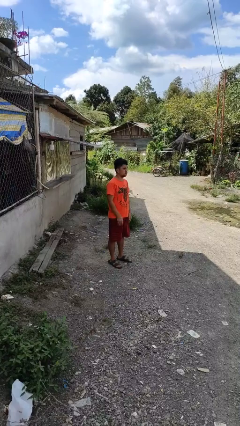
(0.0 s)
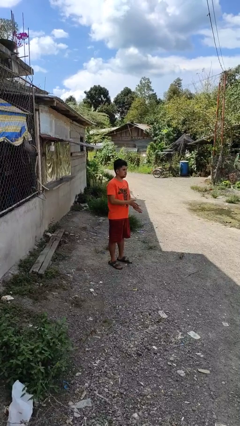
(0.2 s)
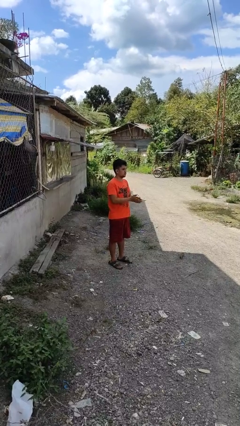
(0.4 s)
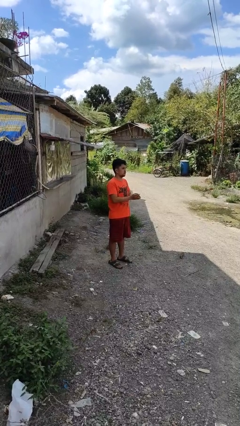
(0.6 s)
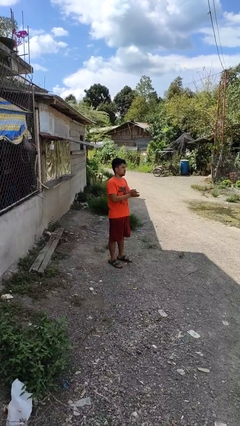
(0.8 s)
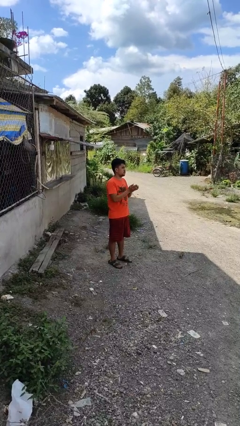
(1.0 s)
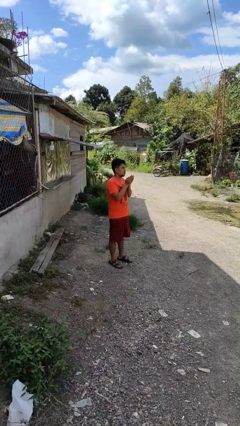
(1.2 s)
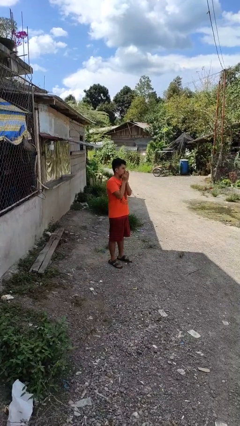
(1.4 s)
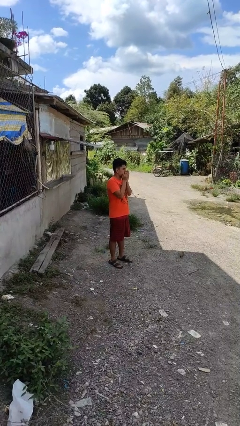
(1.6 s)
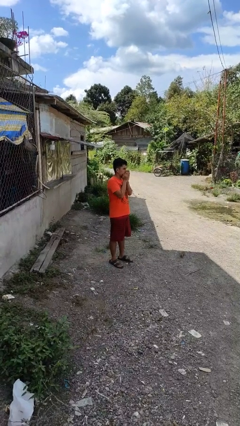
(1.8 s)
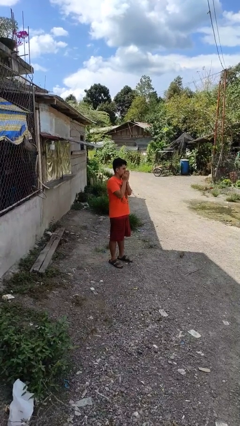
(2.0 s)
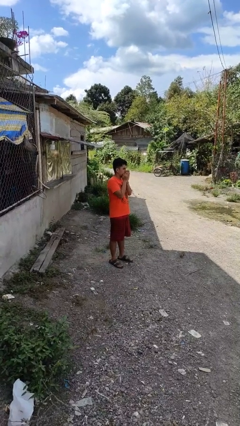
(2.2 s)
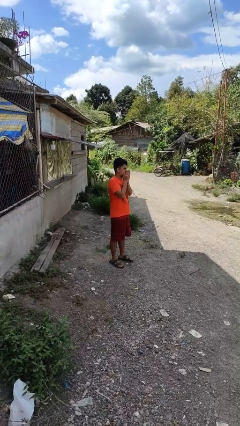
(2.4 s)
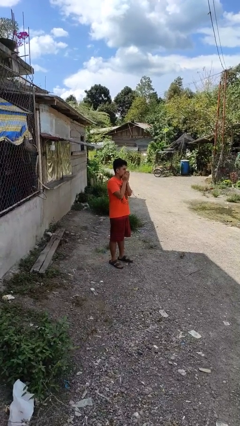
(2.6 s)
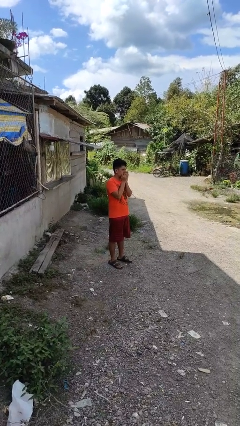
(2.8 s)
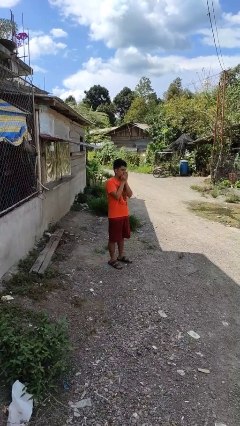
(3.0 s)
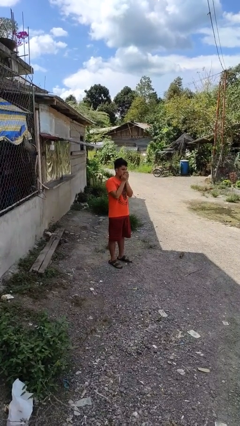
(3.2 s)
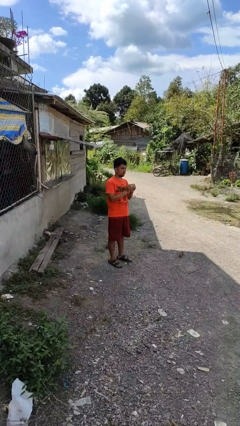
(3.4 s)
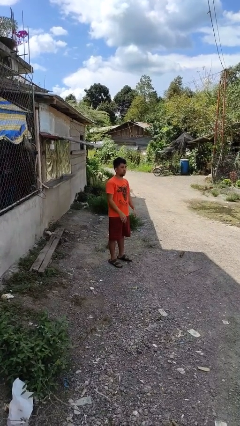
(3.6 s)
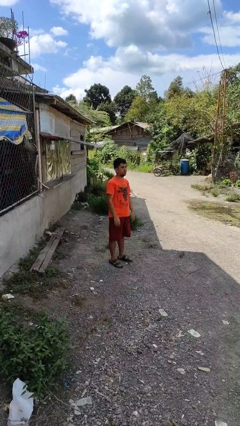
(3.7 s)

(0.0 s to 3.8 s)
person blows into hands

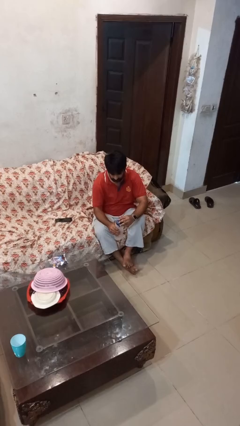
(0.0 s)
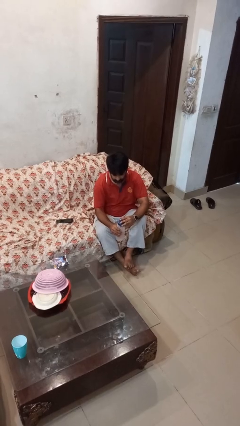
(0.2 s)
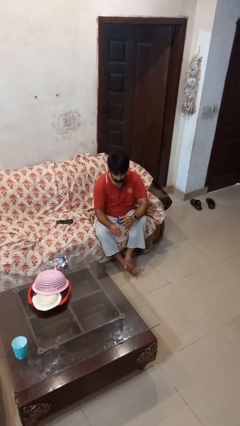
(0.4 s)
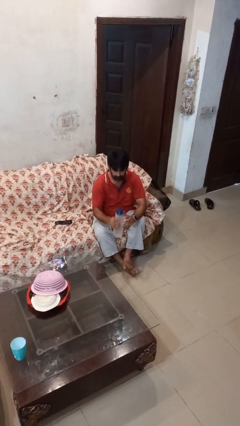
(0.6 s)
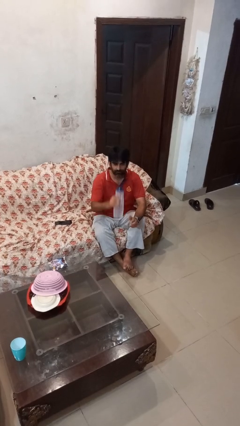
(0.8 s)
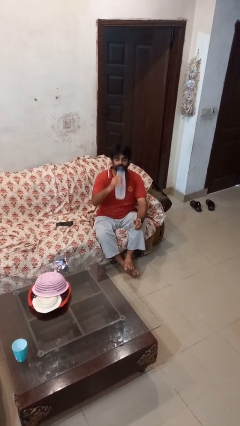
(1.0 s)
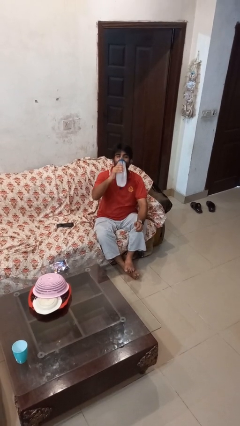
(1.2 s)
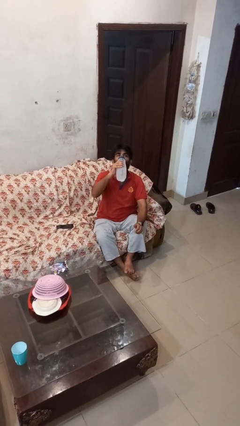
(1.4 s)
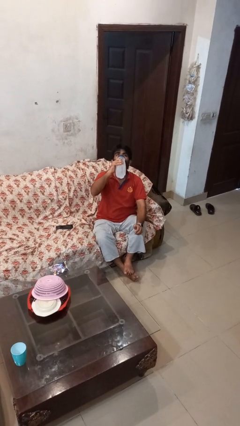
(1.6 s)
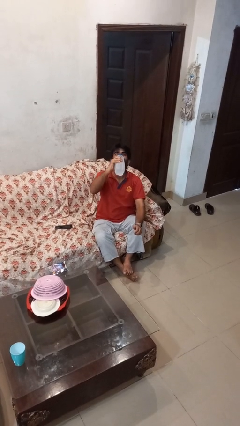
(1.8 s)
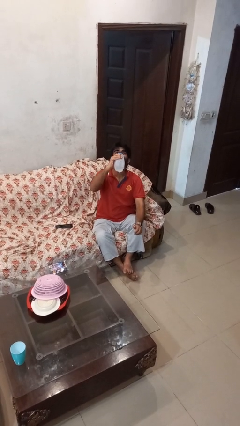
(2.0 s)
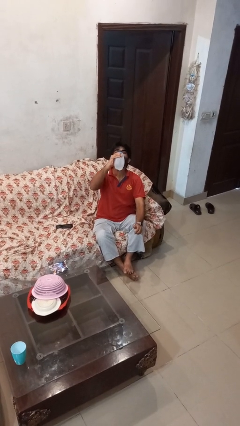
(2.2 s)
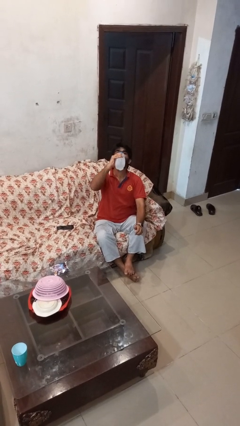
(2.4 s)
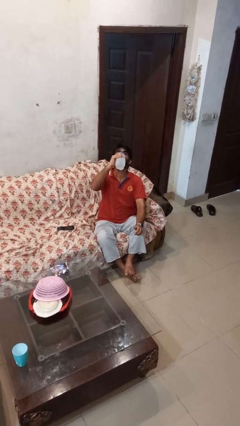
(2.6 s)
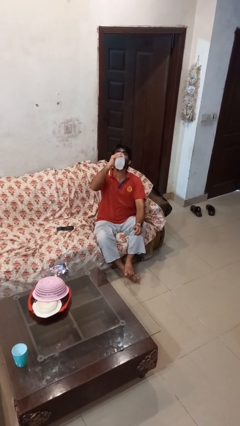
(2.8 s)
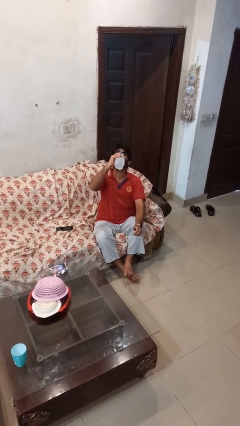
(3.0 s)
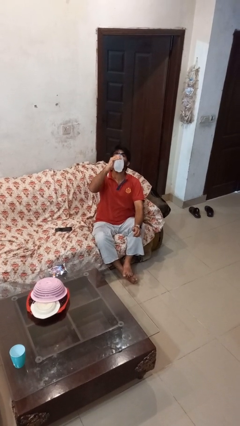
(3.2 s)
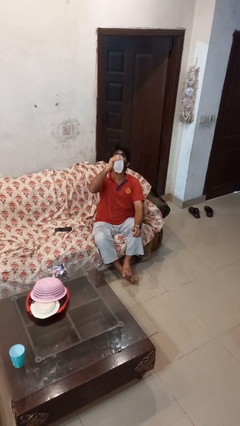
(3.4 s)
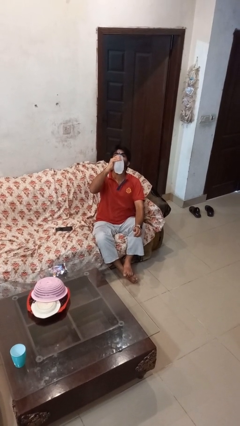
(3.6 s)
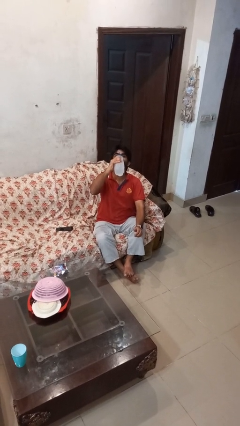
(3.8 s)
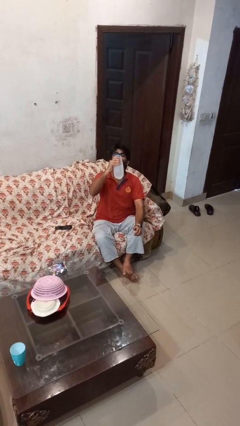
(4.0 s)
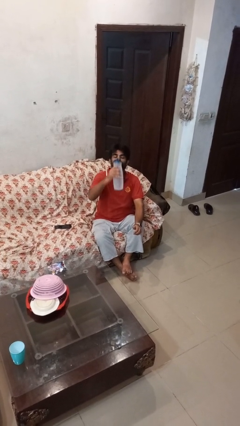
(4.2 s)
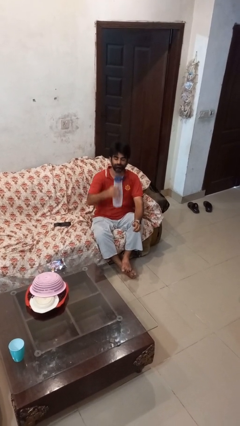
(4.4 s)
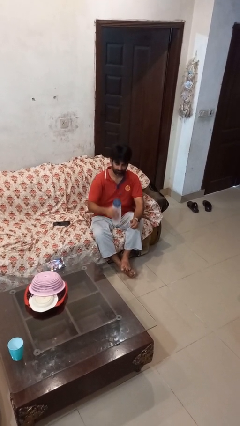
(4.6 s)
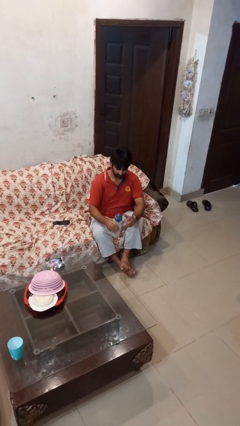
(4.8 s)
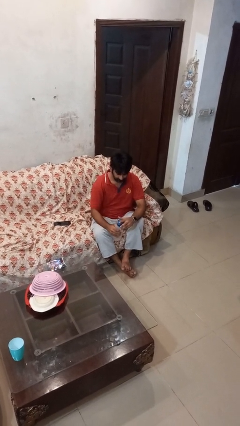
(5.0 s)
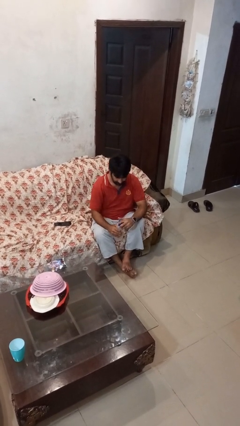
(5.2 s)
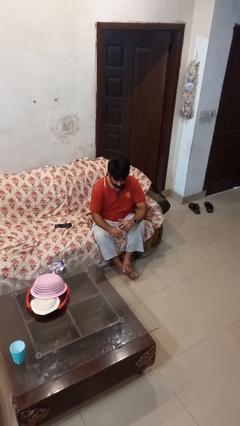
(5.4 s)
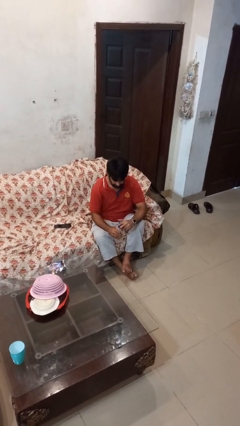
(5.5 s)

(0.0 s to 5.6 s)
person drinks from bottle

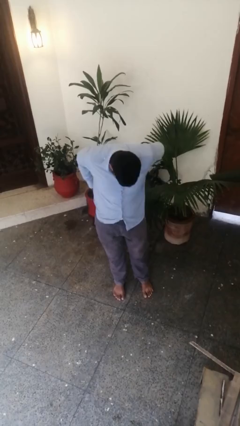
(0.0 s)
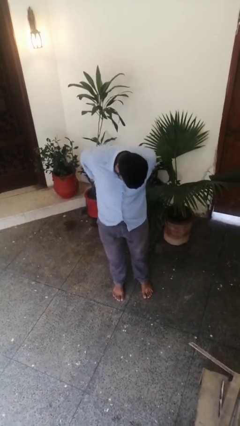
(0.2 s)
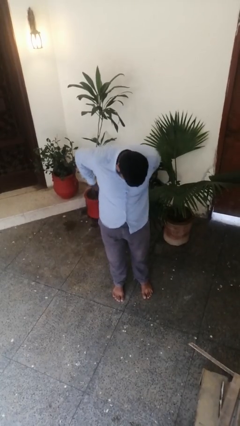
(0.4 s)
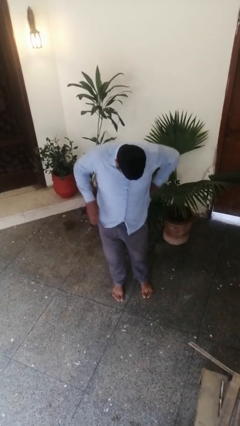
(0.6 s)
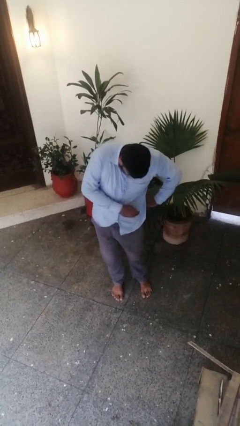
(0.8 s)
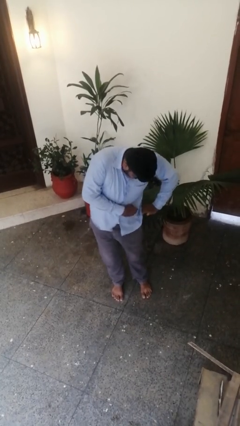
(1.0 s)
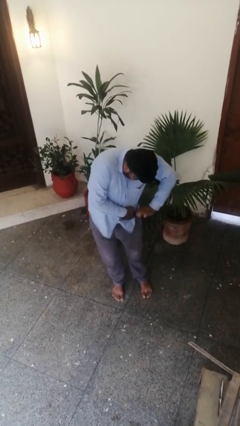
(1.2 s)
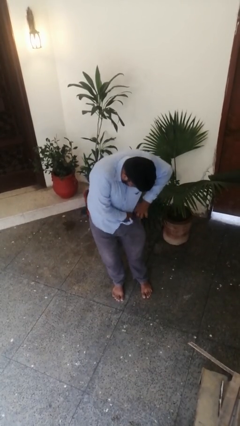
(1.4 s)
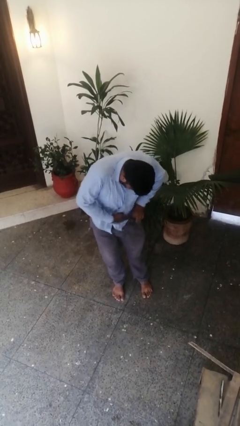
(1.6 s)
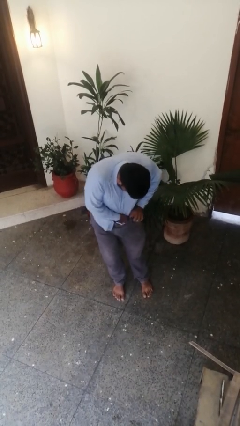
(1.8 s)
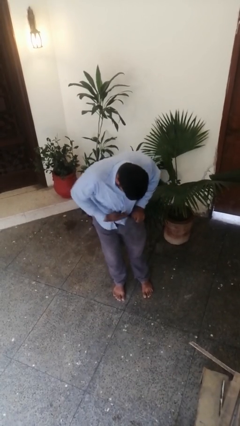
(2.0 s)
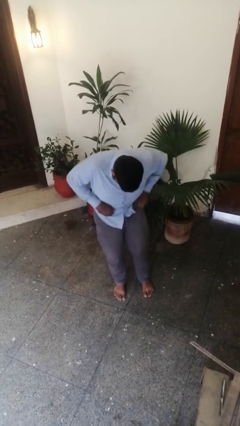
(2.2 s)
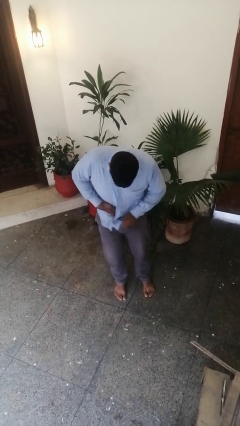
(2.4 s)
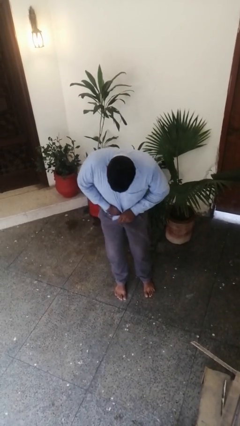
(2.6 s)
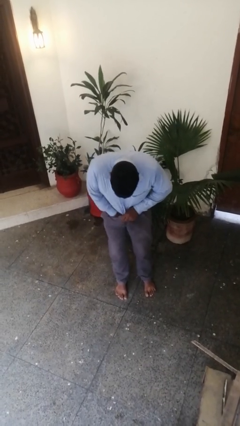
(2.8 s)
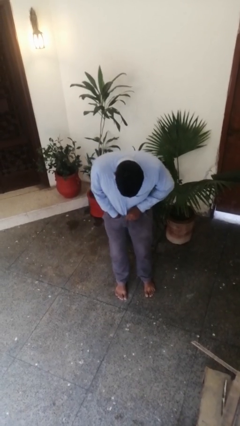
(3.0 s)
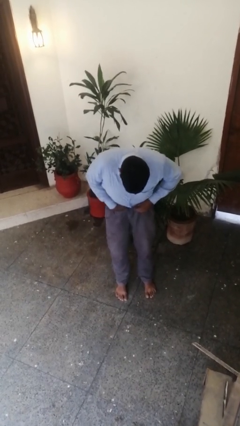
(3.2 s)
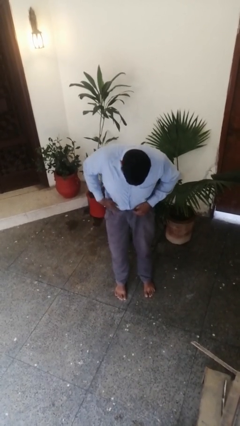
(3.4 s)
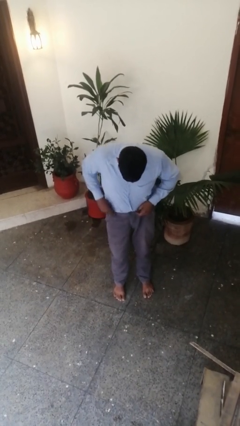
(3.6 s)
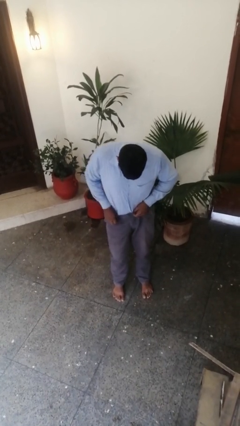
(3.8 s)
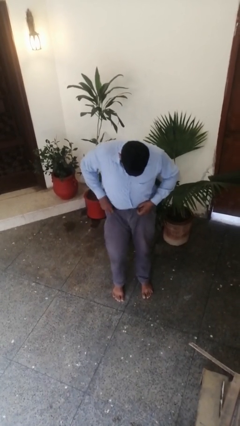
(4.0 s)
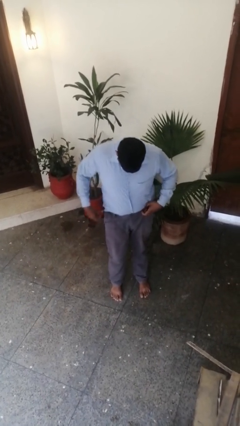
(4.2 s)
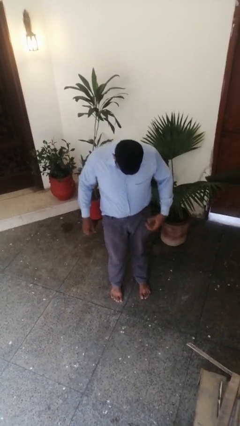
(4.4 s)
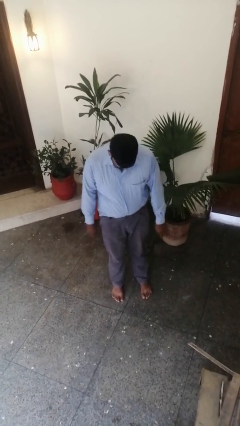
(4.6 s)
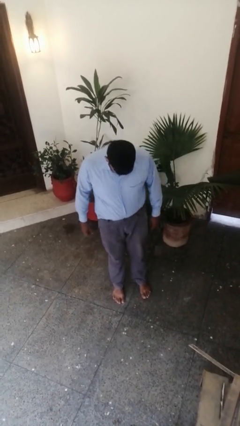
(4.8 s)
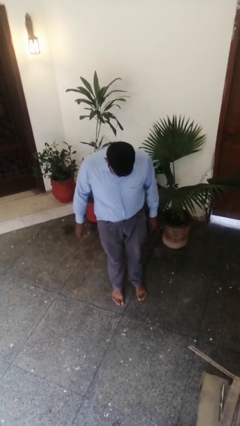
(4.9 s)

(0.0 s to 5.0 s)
person tucks in shirt

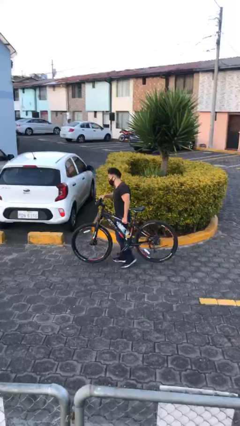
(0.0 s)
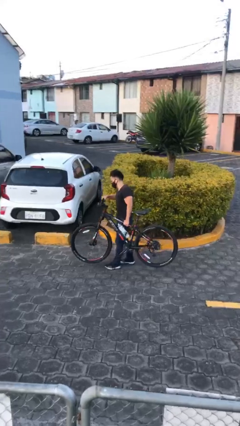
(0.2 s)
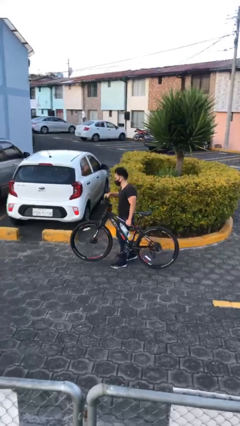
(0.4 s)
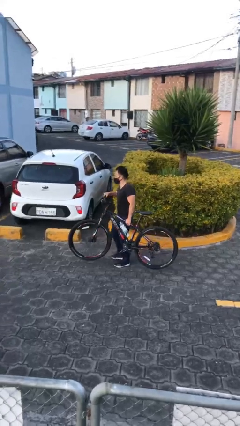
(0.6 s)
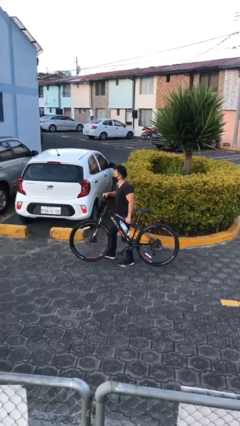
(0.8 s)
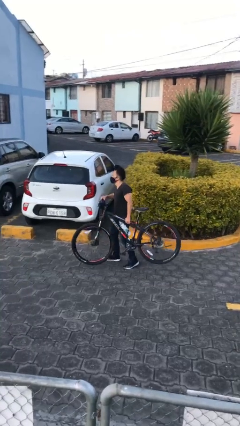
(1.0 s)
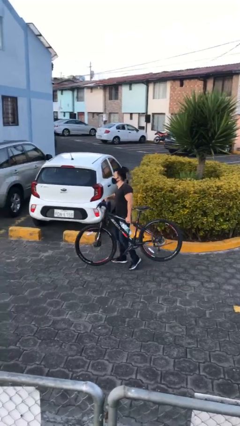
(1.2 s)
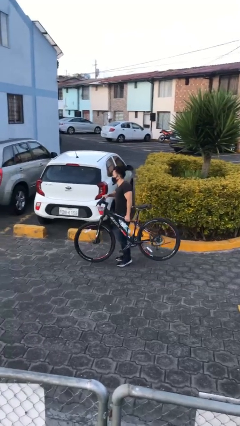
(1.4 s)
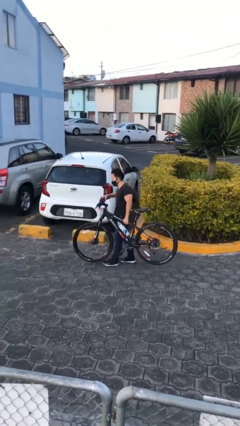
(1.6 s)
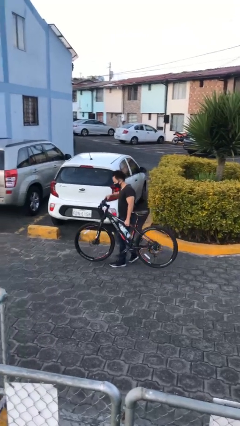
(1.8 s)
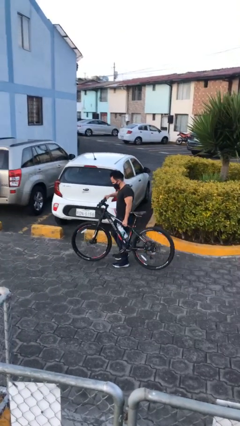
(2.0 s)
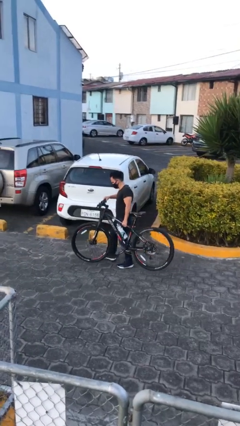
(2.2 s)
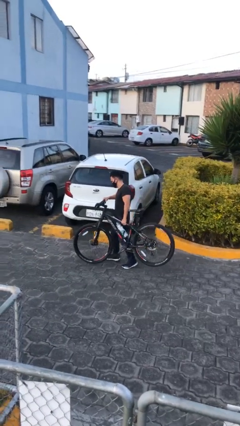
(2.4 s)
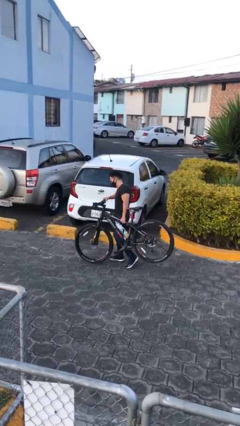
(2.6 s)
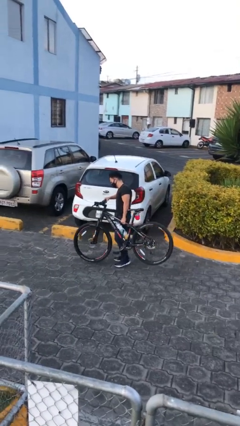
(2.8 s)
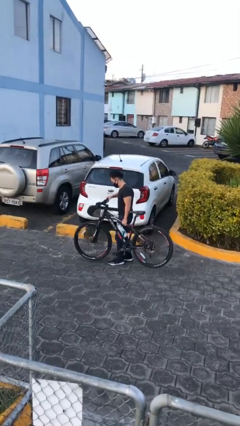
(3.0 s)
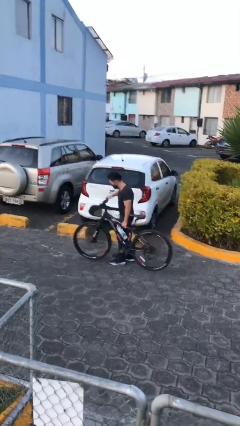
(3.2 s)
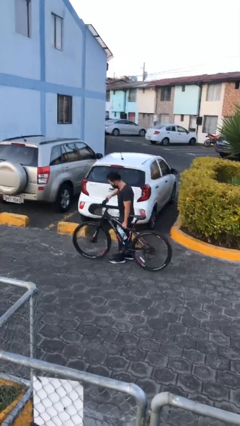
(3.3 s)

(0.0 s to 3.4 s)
person carries heavy object

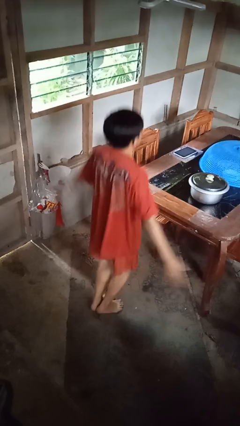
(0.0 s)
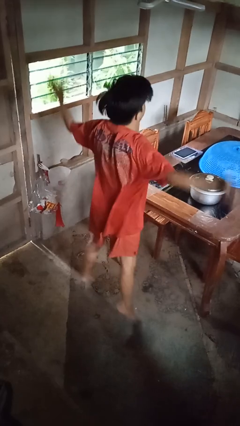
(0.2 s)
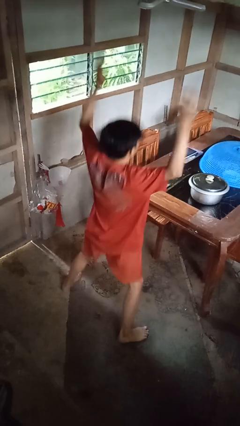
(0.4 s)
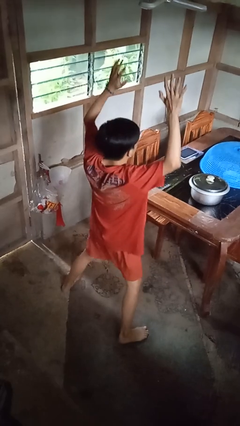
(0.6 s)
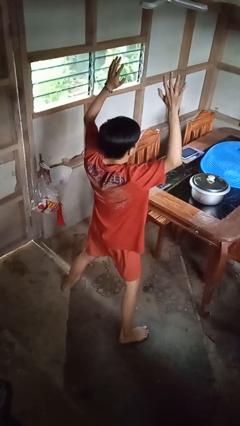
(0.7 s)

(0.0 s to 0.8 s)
person exercises with jumping jacks
